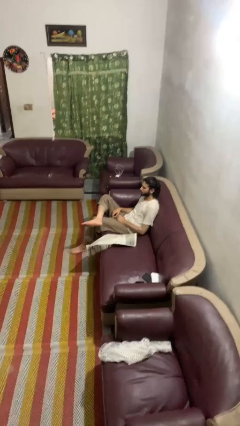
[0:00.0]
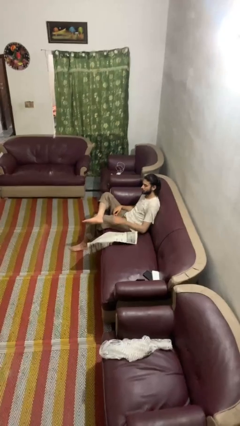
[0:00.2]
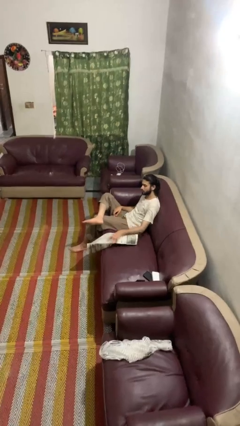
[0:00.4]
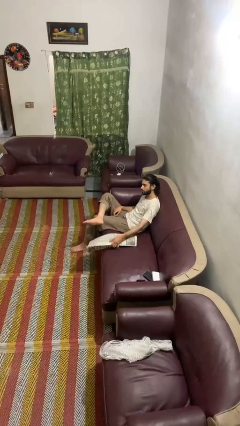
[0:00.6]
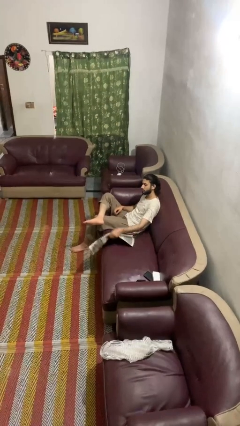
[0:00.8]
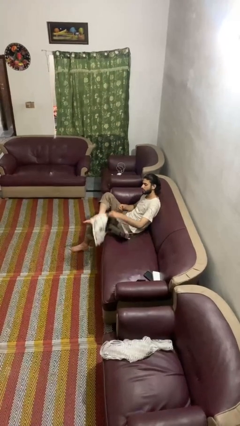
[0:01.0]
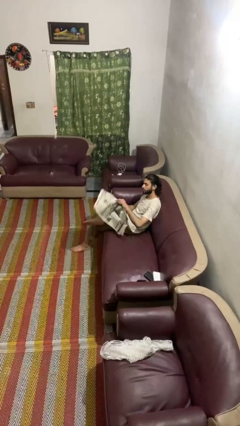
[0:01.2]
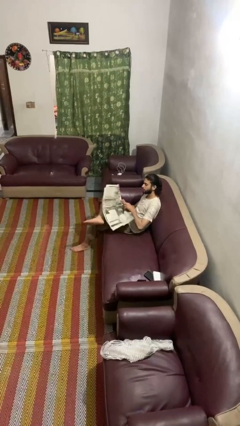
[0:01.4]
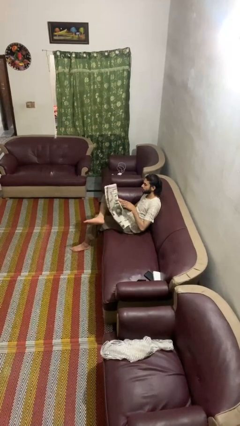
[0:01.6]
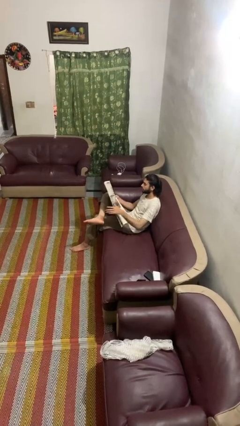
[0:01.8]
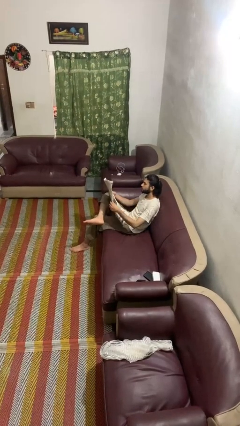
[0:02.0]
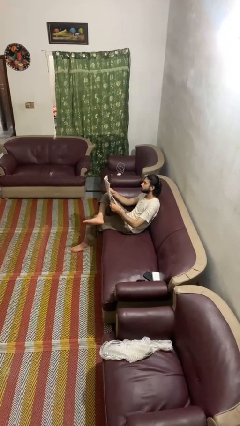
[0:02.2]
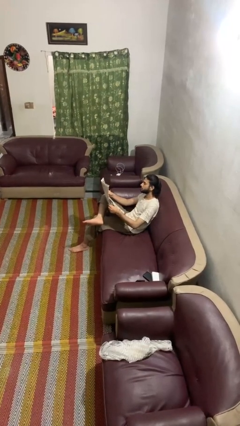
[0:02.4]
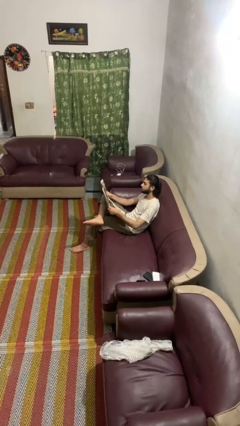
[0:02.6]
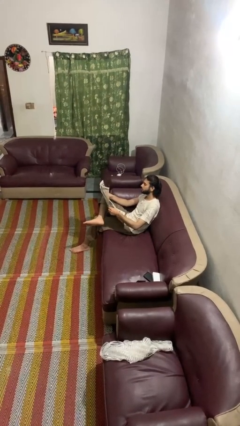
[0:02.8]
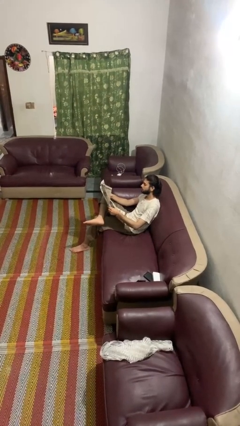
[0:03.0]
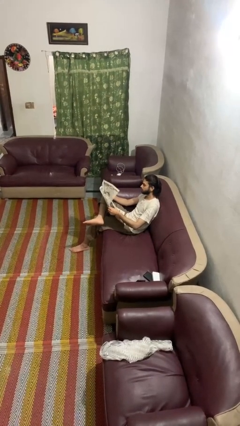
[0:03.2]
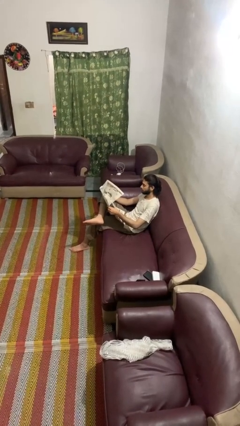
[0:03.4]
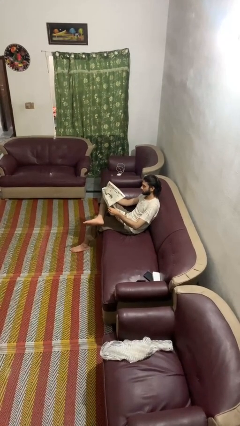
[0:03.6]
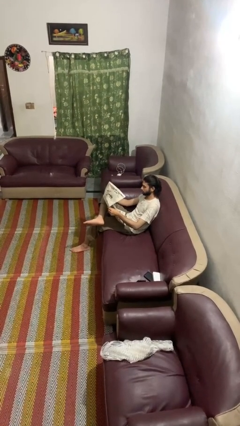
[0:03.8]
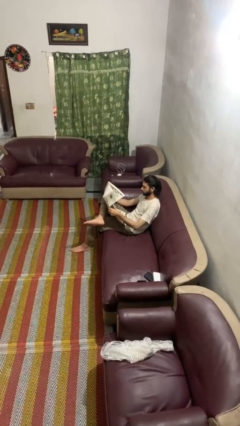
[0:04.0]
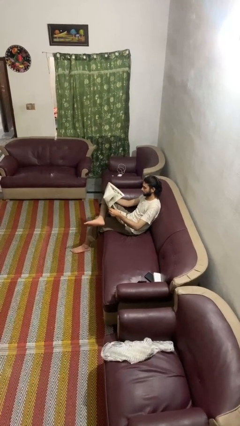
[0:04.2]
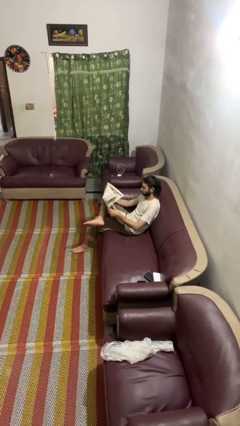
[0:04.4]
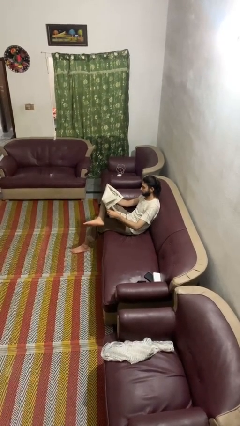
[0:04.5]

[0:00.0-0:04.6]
person reads newspaper

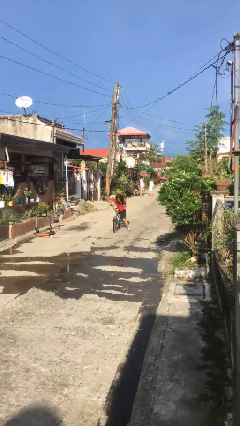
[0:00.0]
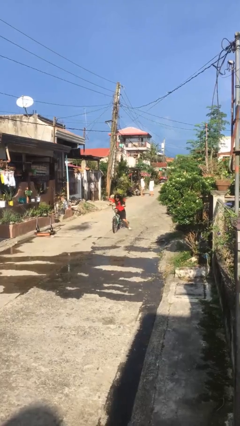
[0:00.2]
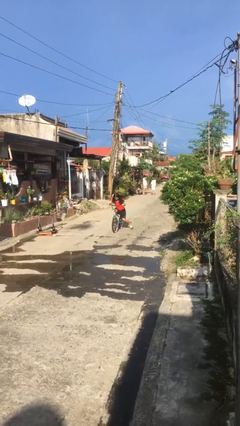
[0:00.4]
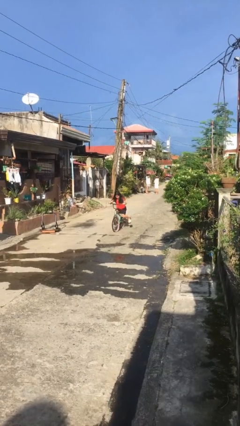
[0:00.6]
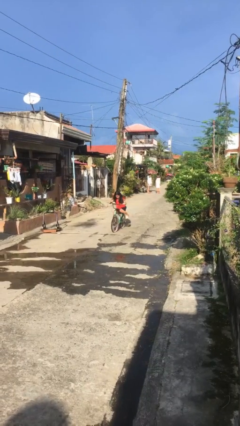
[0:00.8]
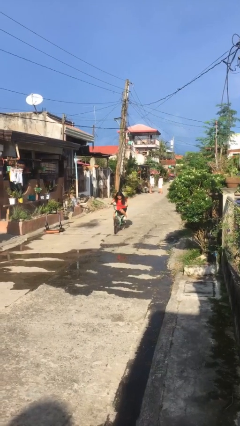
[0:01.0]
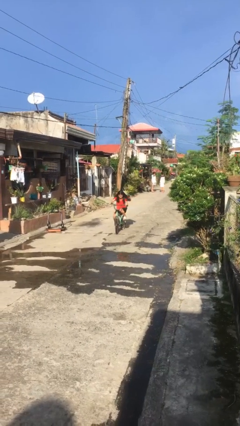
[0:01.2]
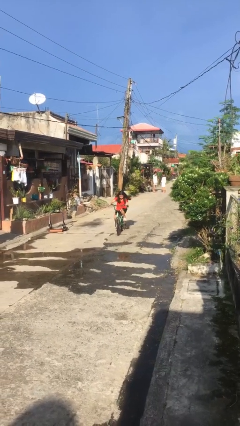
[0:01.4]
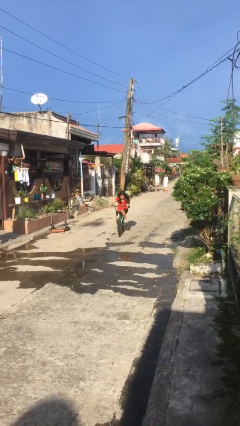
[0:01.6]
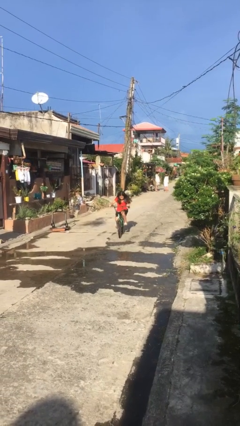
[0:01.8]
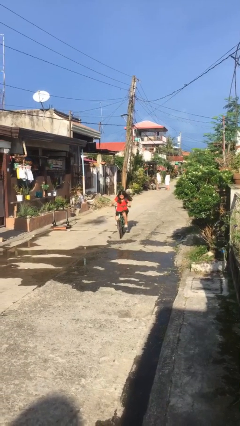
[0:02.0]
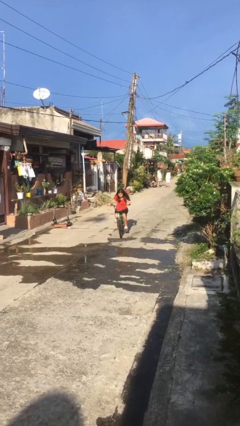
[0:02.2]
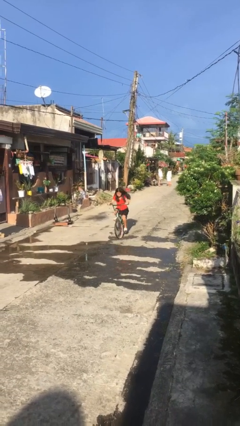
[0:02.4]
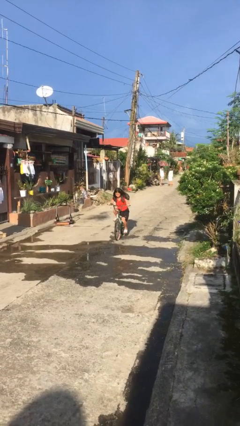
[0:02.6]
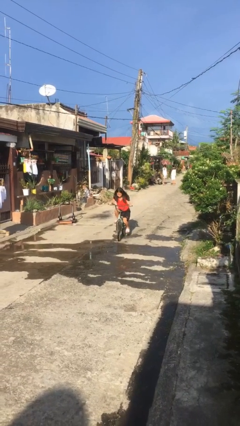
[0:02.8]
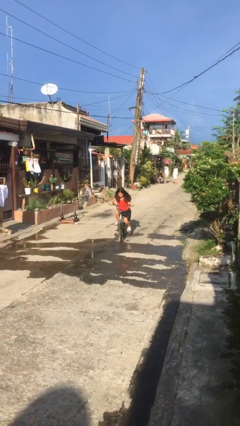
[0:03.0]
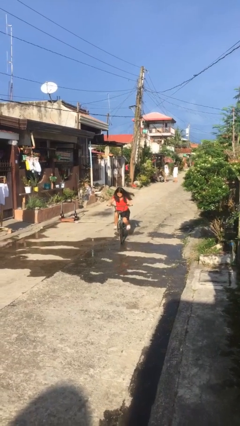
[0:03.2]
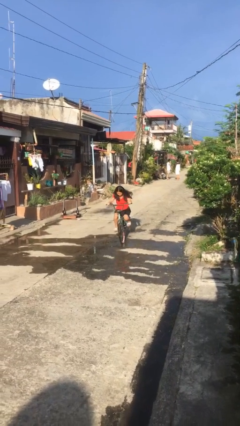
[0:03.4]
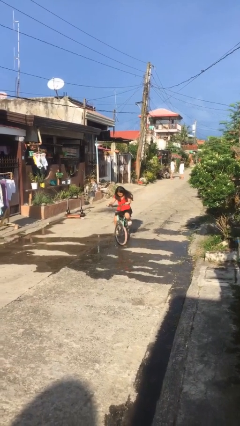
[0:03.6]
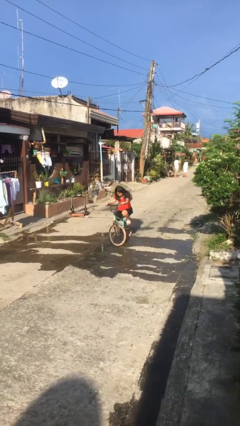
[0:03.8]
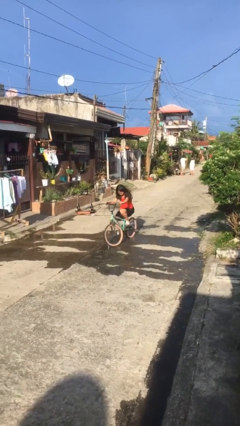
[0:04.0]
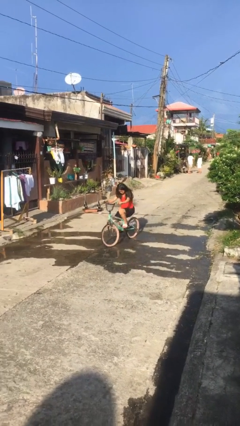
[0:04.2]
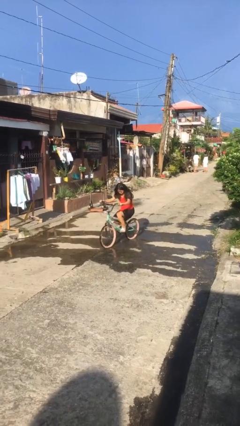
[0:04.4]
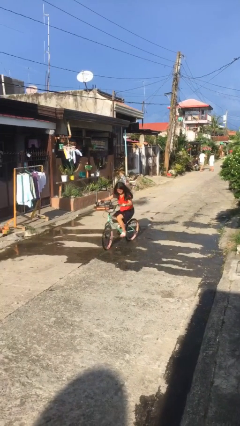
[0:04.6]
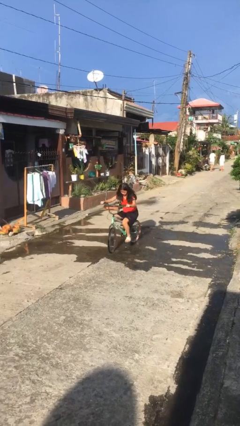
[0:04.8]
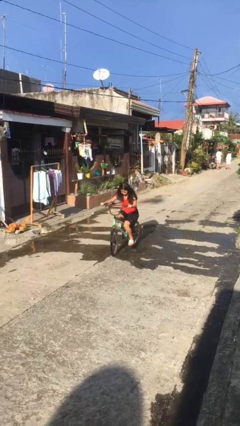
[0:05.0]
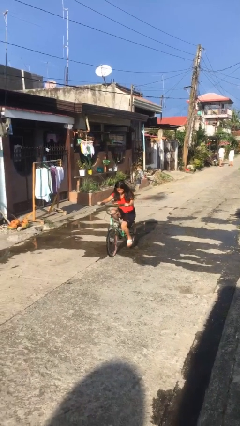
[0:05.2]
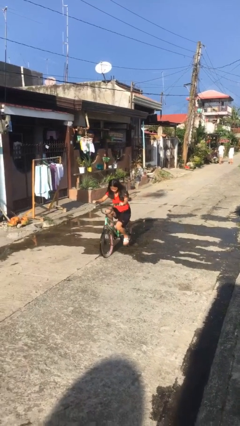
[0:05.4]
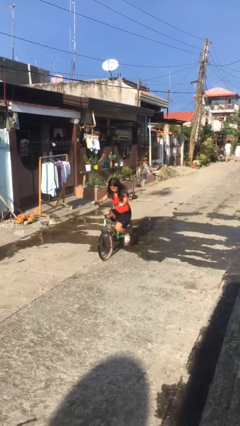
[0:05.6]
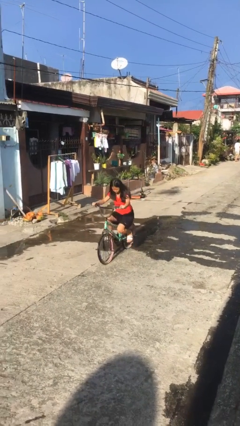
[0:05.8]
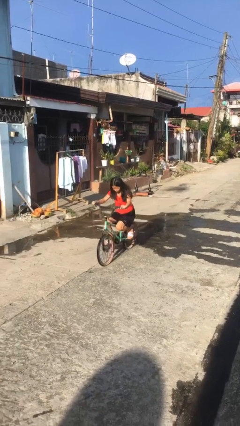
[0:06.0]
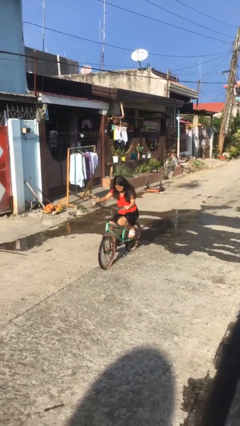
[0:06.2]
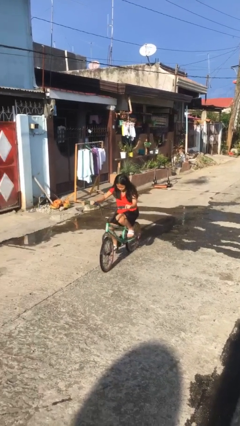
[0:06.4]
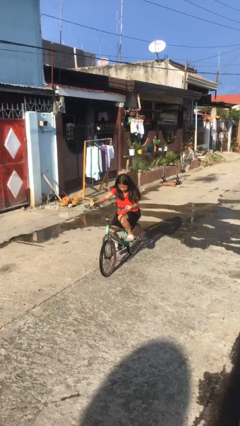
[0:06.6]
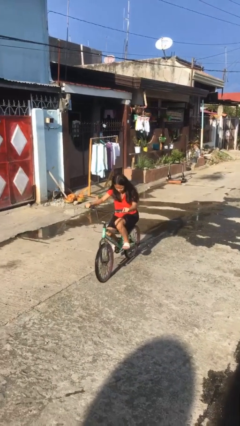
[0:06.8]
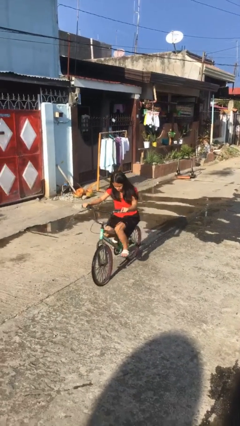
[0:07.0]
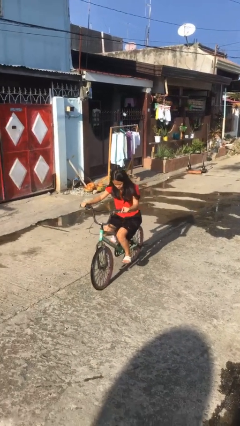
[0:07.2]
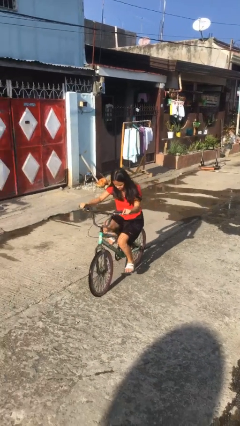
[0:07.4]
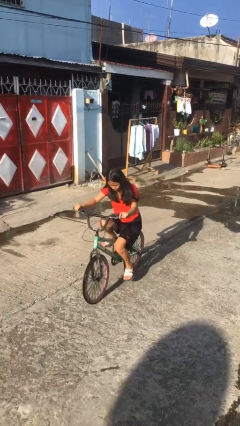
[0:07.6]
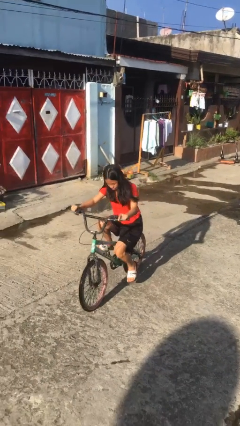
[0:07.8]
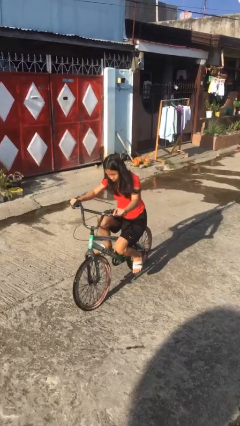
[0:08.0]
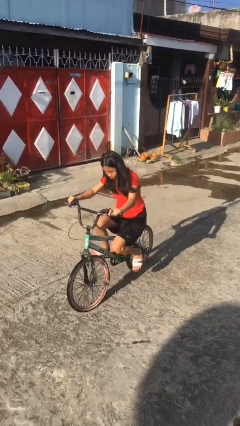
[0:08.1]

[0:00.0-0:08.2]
person rides bicycle

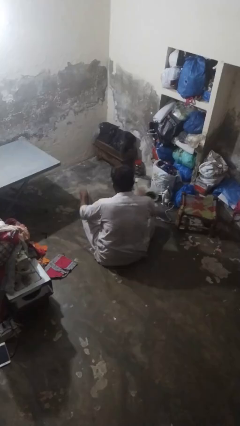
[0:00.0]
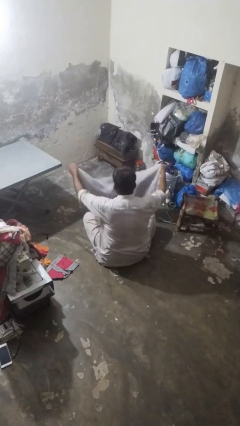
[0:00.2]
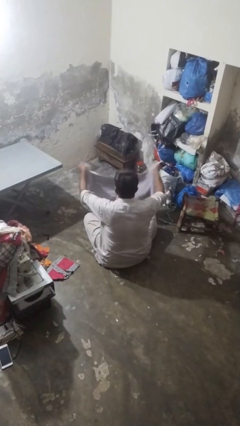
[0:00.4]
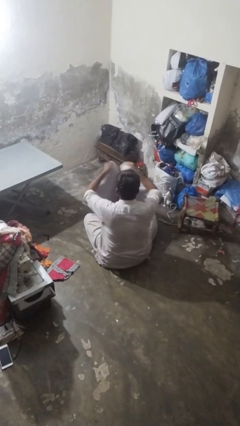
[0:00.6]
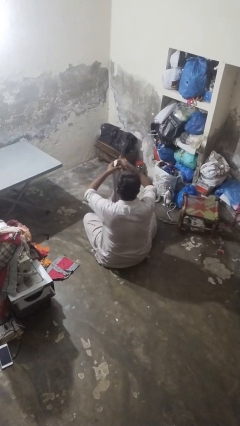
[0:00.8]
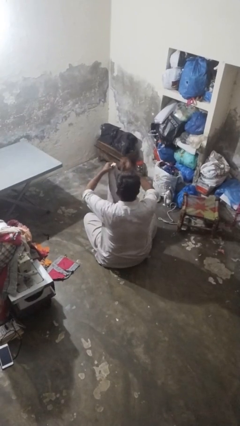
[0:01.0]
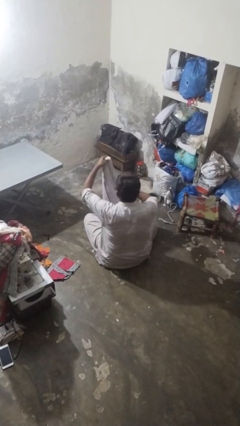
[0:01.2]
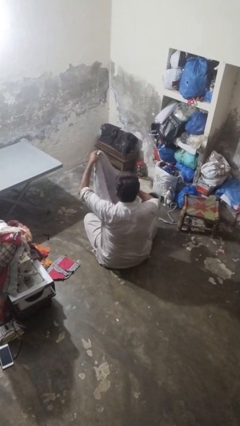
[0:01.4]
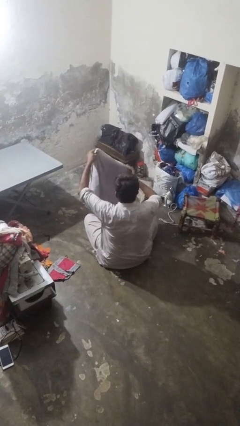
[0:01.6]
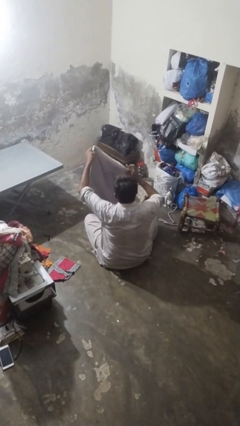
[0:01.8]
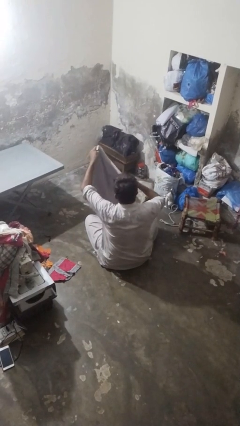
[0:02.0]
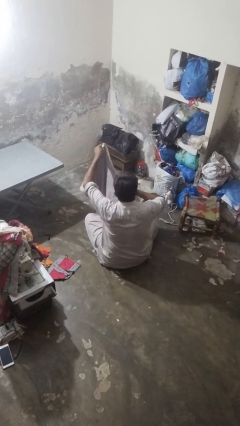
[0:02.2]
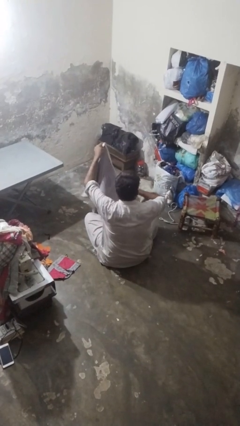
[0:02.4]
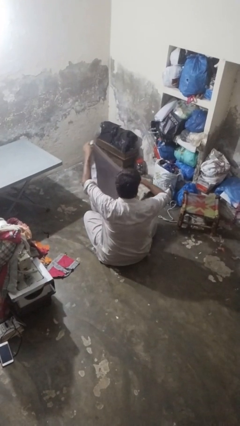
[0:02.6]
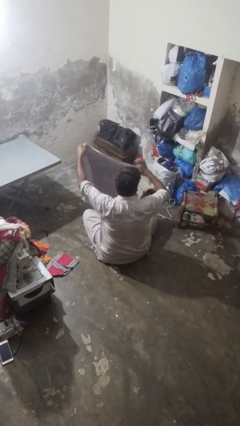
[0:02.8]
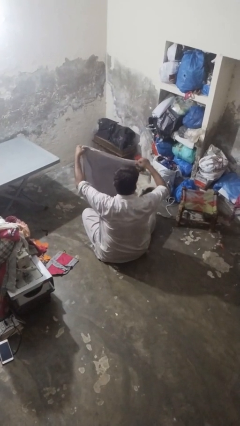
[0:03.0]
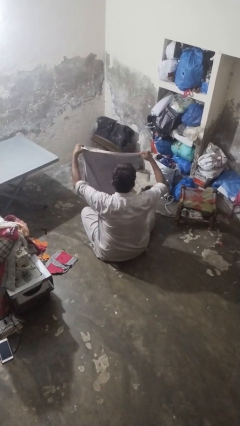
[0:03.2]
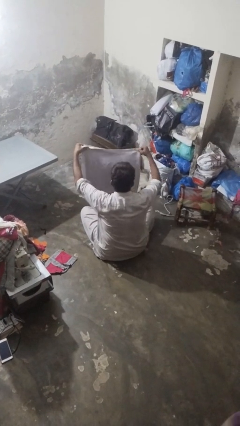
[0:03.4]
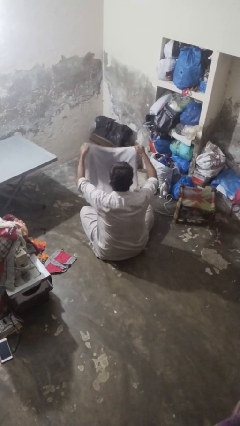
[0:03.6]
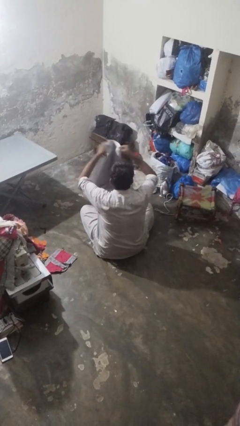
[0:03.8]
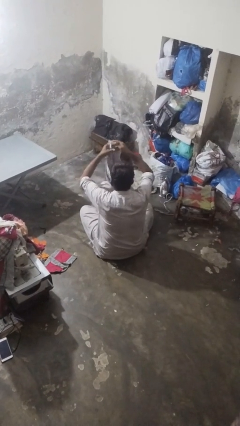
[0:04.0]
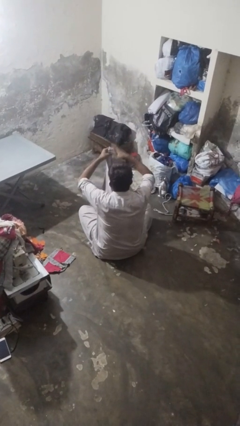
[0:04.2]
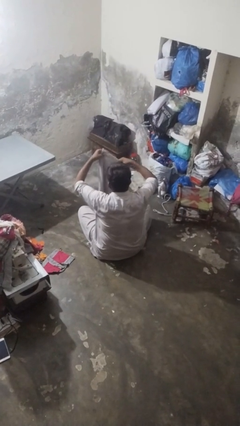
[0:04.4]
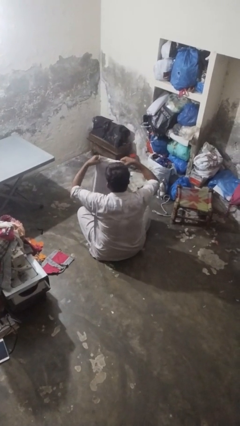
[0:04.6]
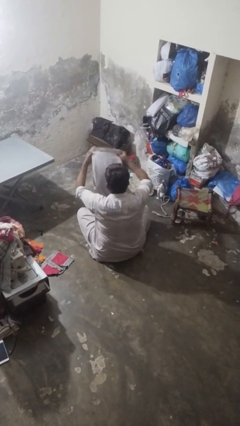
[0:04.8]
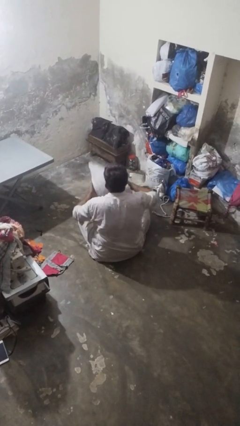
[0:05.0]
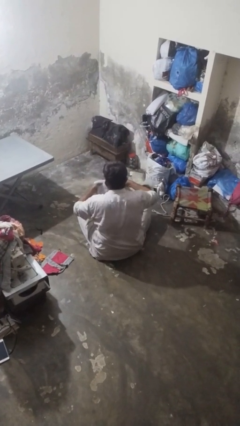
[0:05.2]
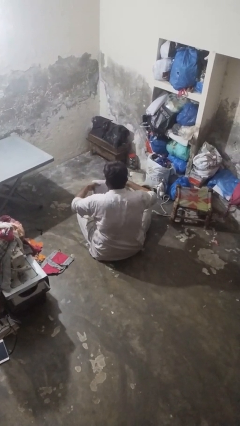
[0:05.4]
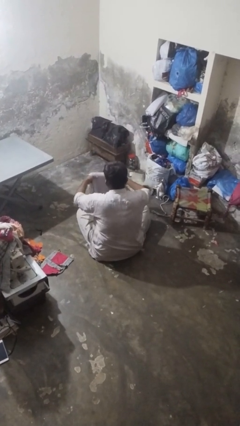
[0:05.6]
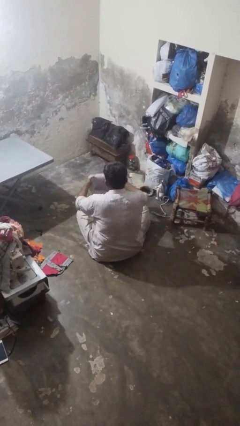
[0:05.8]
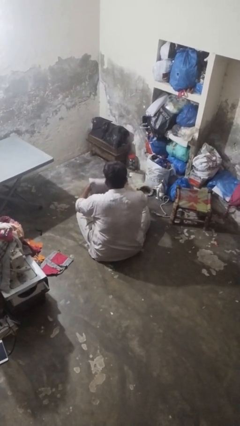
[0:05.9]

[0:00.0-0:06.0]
person folds towel
